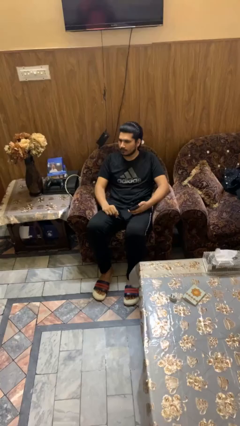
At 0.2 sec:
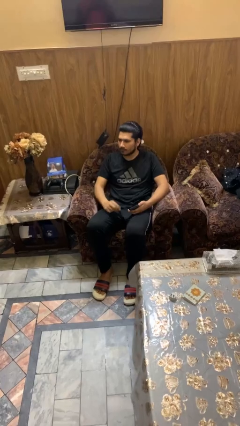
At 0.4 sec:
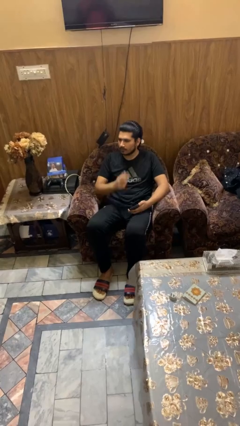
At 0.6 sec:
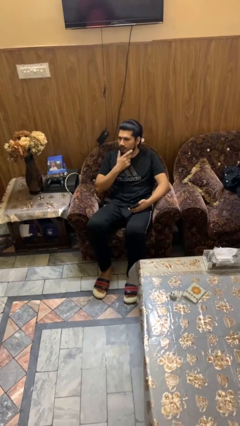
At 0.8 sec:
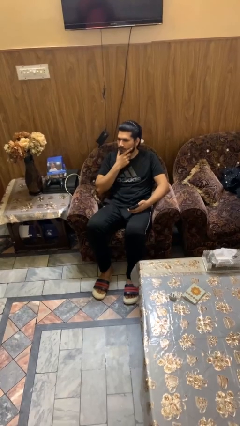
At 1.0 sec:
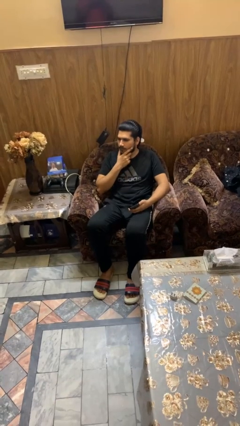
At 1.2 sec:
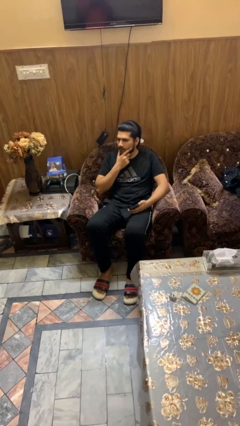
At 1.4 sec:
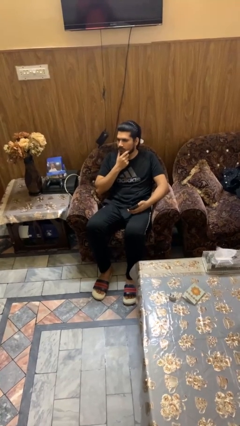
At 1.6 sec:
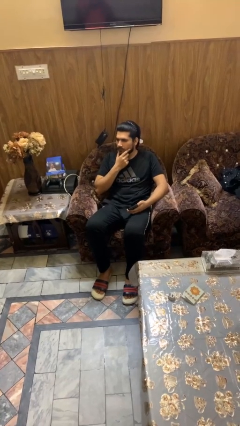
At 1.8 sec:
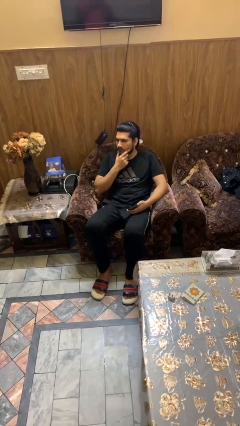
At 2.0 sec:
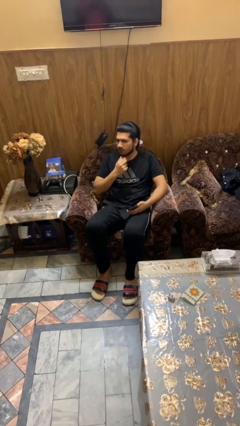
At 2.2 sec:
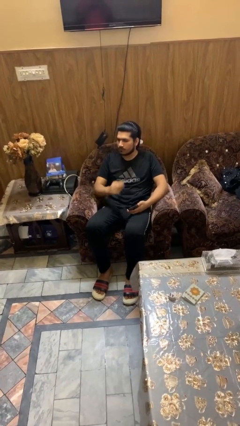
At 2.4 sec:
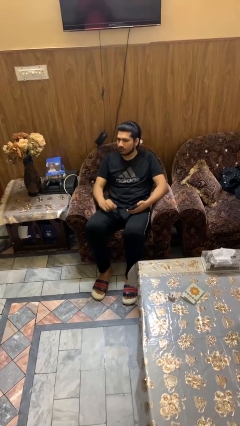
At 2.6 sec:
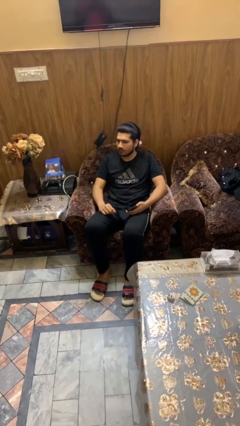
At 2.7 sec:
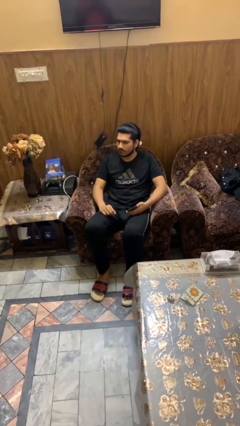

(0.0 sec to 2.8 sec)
person strokes chin

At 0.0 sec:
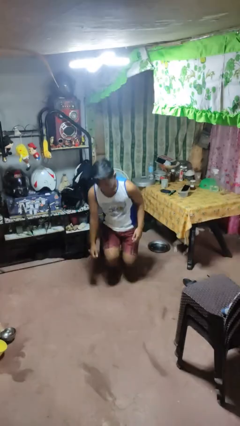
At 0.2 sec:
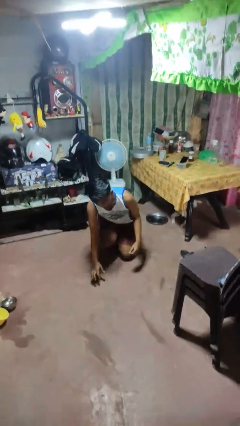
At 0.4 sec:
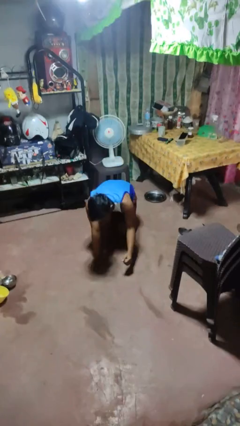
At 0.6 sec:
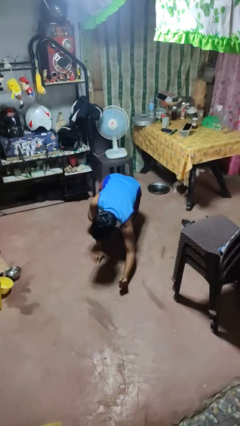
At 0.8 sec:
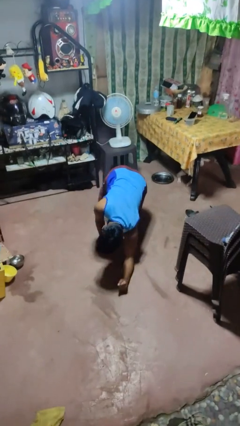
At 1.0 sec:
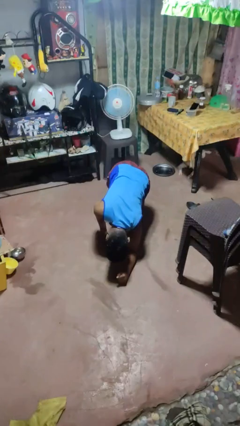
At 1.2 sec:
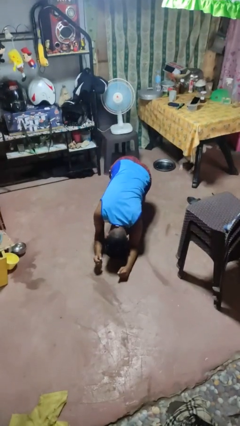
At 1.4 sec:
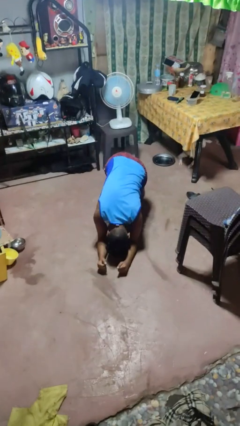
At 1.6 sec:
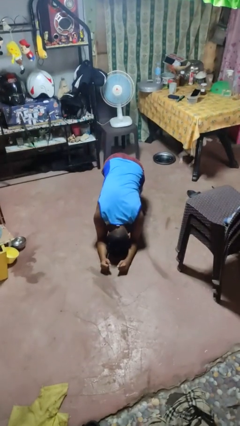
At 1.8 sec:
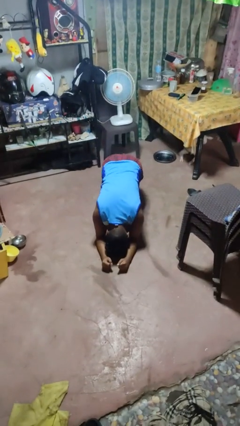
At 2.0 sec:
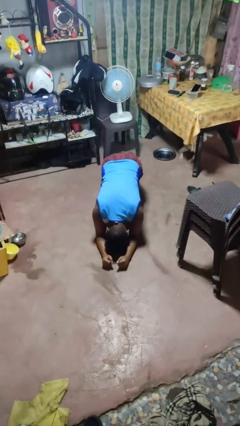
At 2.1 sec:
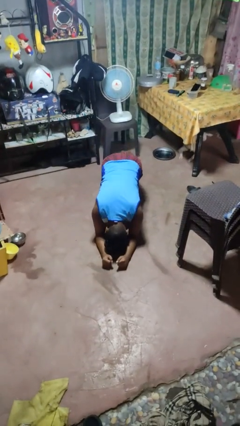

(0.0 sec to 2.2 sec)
person exercises with plank

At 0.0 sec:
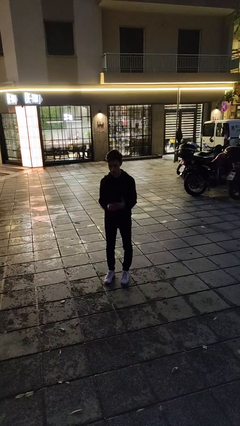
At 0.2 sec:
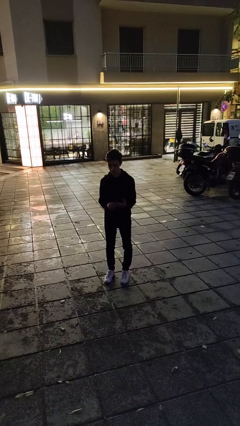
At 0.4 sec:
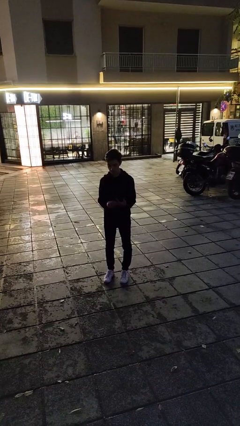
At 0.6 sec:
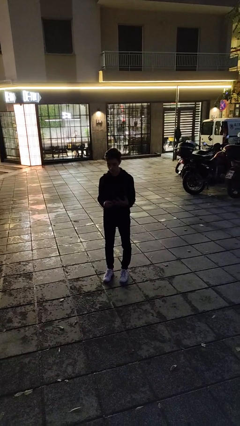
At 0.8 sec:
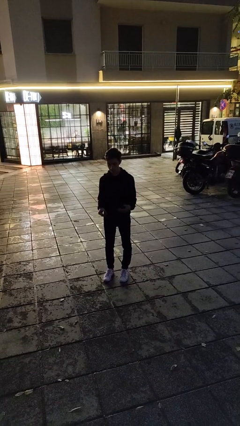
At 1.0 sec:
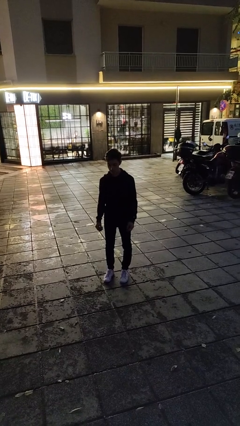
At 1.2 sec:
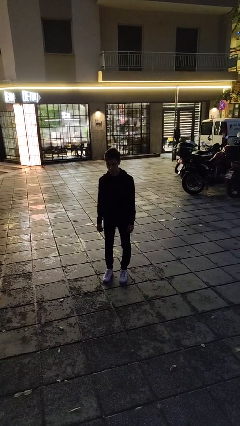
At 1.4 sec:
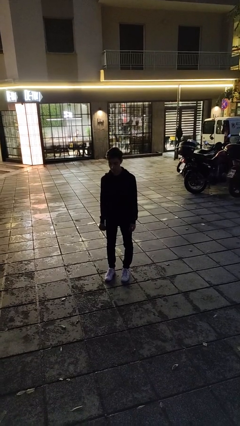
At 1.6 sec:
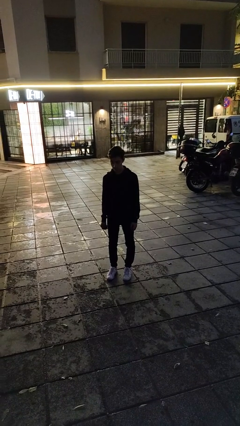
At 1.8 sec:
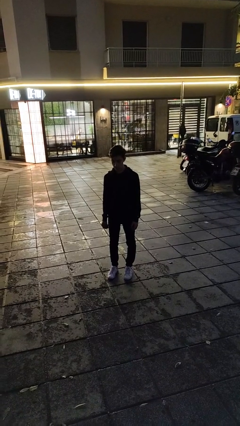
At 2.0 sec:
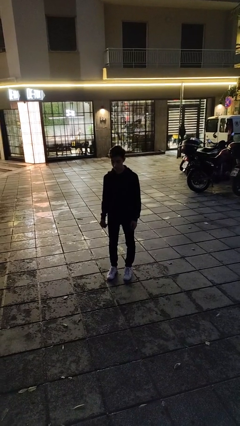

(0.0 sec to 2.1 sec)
person takes off ring

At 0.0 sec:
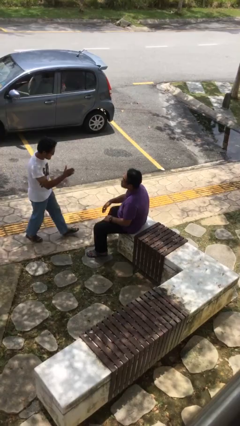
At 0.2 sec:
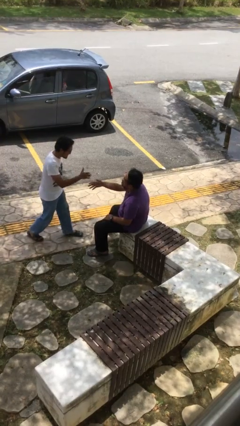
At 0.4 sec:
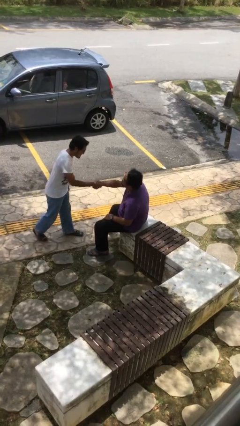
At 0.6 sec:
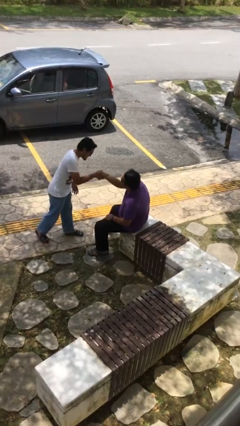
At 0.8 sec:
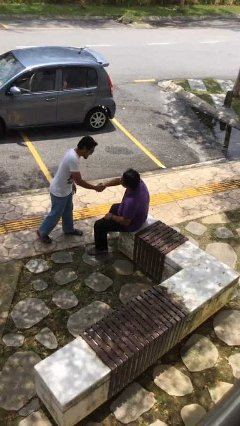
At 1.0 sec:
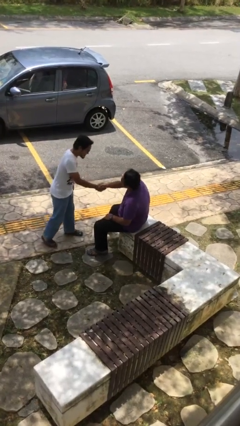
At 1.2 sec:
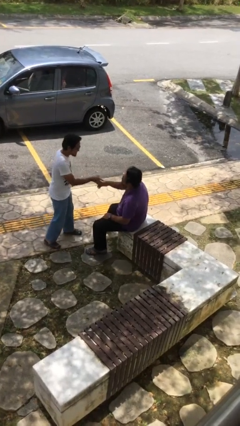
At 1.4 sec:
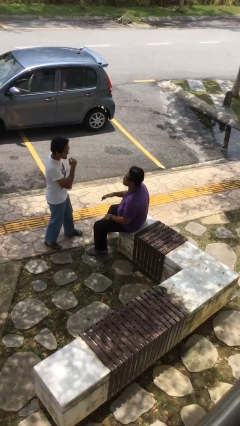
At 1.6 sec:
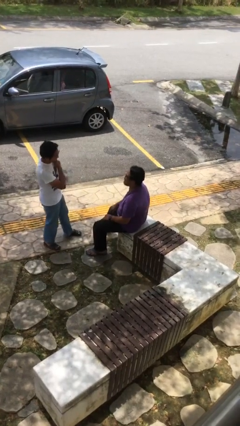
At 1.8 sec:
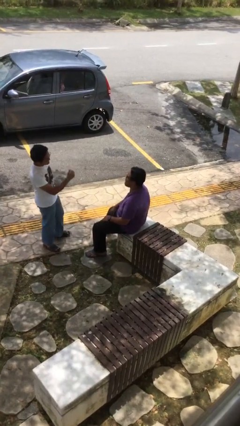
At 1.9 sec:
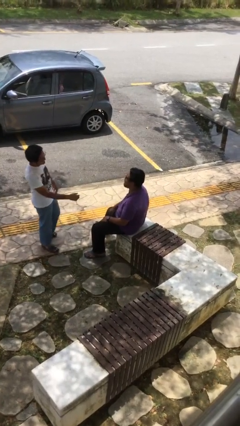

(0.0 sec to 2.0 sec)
person shakes hand

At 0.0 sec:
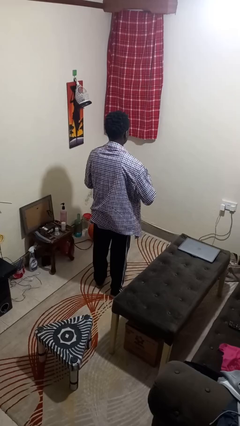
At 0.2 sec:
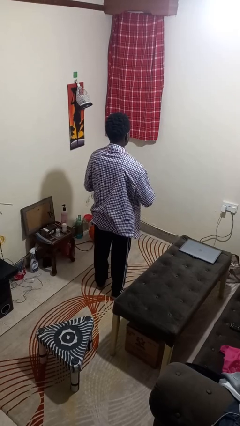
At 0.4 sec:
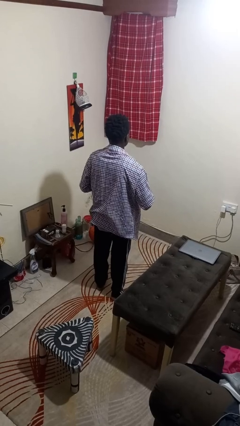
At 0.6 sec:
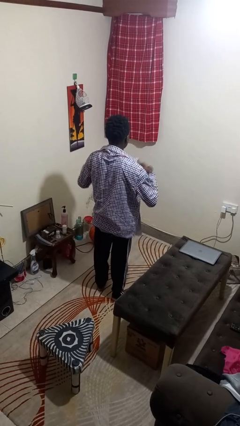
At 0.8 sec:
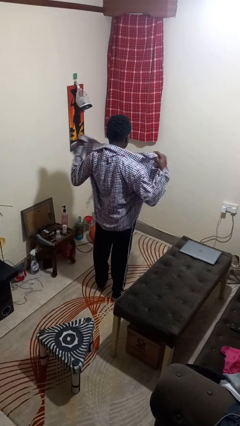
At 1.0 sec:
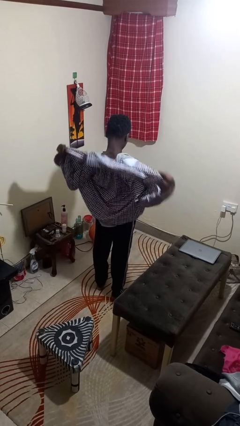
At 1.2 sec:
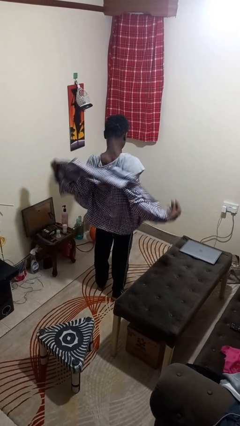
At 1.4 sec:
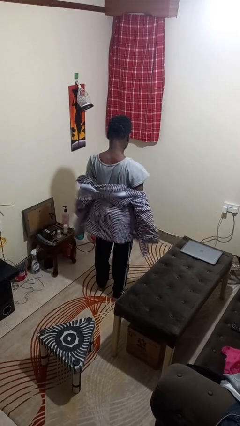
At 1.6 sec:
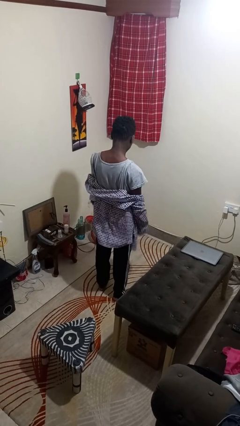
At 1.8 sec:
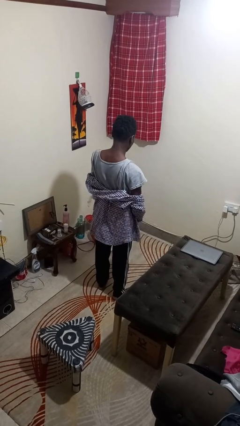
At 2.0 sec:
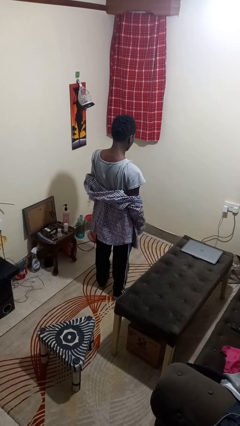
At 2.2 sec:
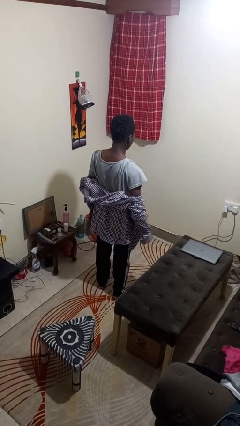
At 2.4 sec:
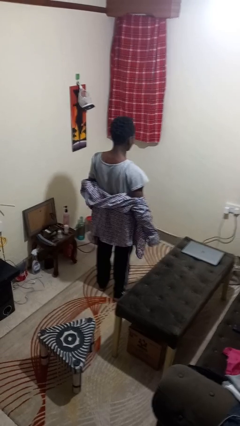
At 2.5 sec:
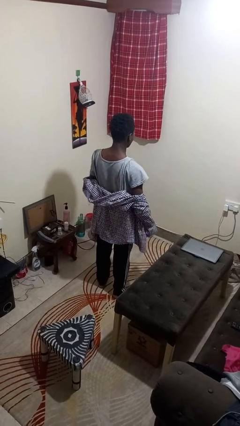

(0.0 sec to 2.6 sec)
person takes off shirt

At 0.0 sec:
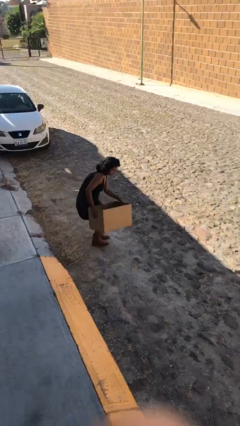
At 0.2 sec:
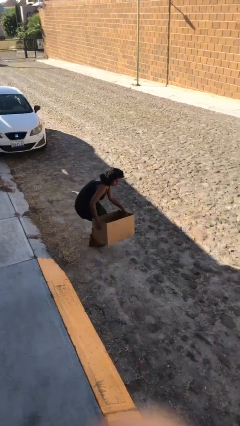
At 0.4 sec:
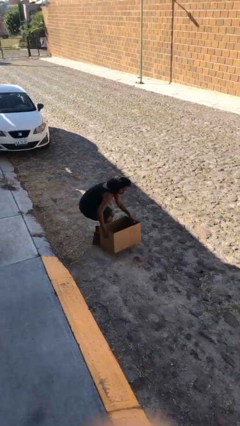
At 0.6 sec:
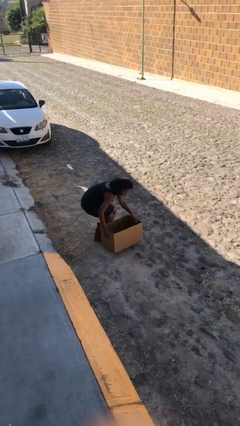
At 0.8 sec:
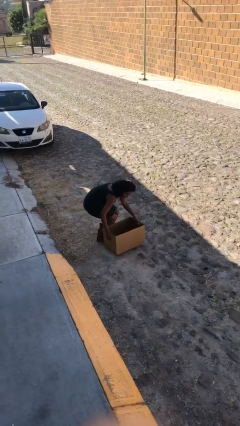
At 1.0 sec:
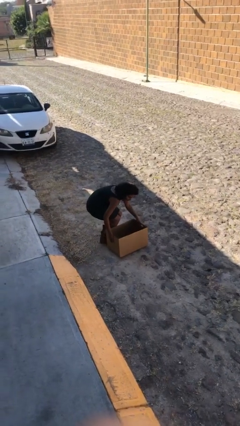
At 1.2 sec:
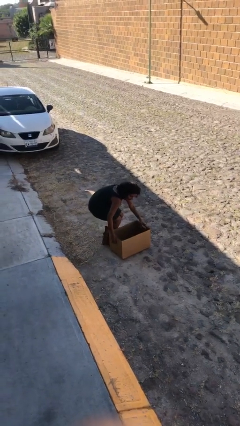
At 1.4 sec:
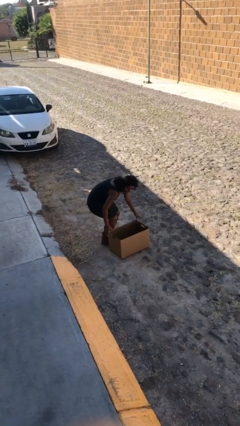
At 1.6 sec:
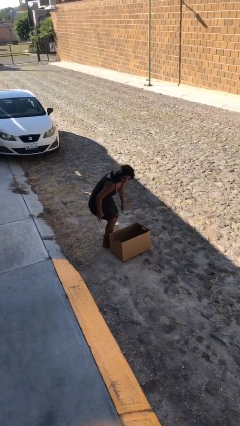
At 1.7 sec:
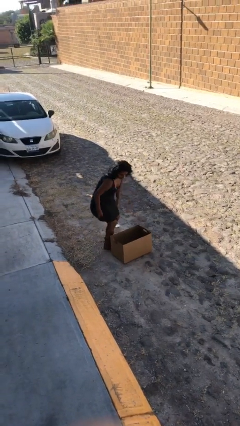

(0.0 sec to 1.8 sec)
person puts down object on floor

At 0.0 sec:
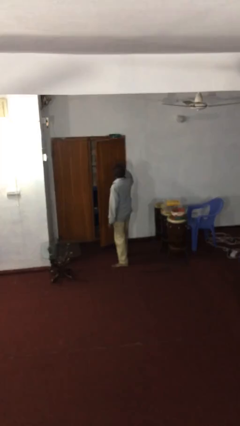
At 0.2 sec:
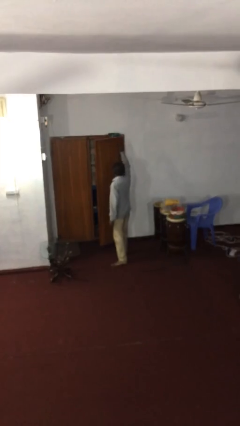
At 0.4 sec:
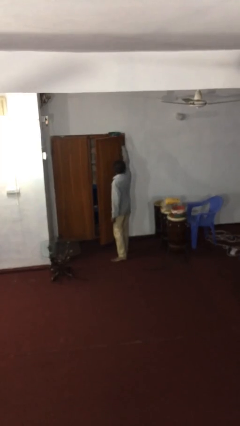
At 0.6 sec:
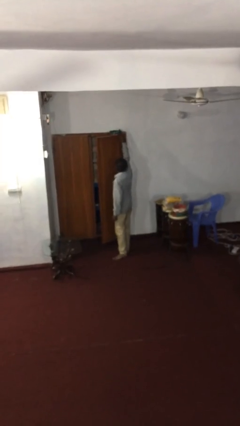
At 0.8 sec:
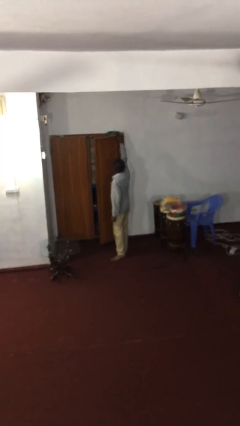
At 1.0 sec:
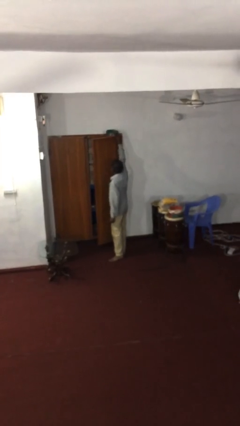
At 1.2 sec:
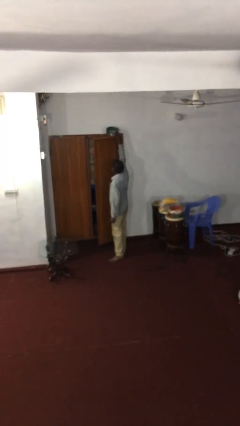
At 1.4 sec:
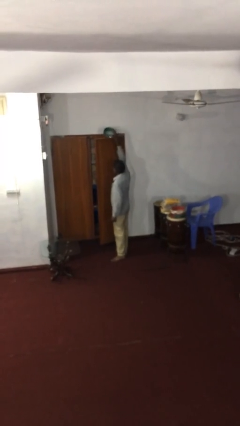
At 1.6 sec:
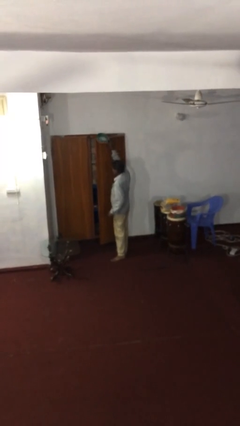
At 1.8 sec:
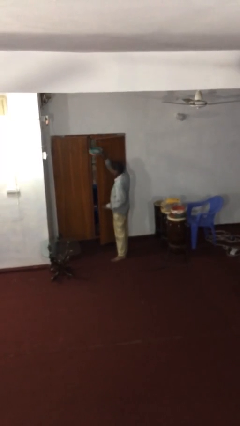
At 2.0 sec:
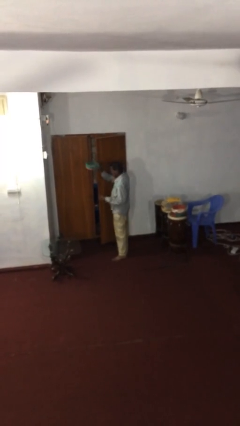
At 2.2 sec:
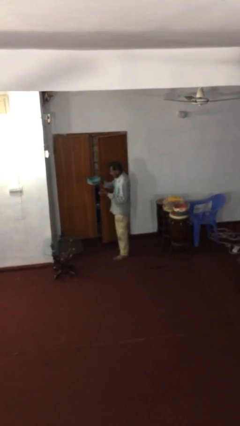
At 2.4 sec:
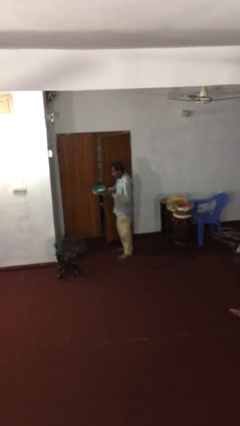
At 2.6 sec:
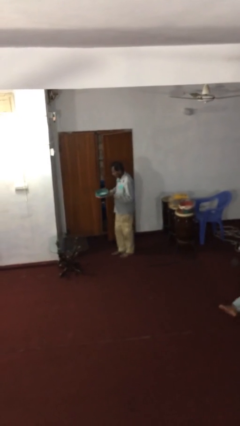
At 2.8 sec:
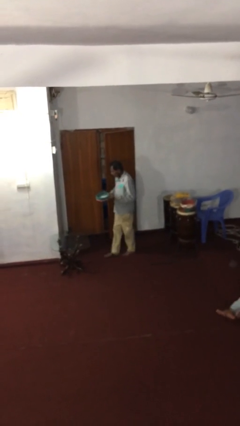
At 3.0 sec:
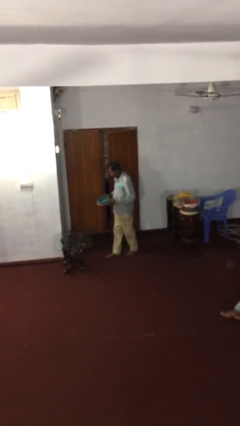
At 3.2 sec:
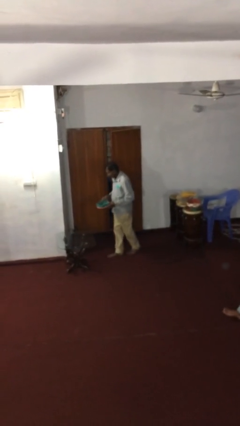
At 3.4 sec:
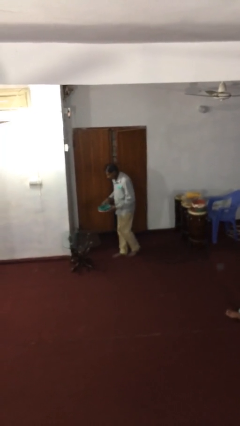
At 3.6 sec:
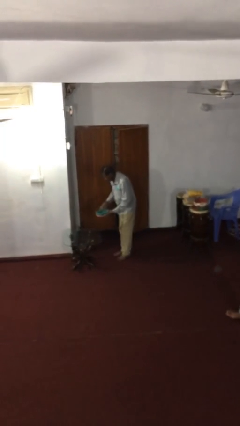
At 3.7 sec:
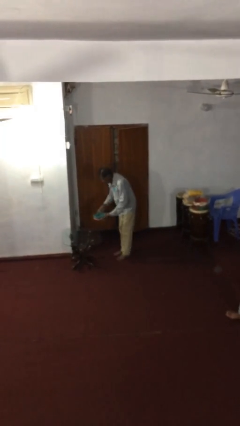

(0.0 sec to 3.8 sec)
person picks up object from shelf
